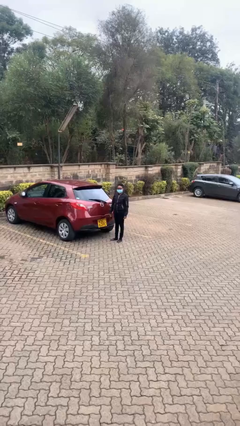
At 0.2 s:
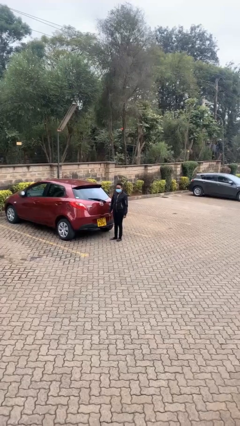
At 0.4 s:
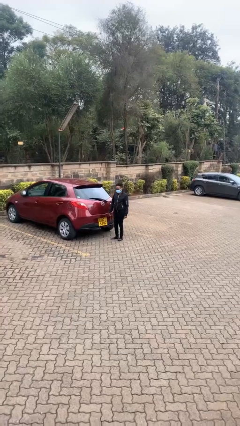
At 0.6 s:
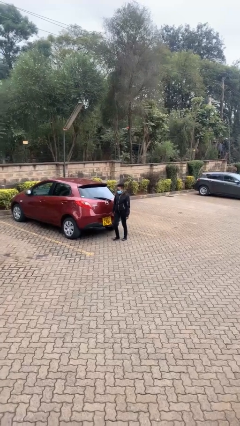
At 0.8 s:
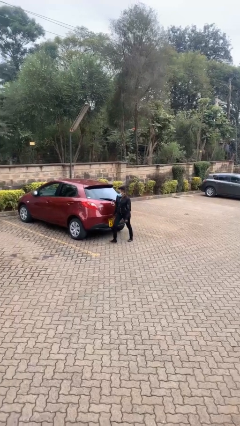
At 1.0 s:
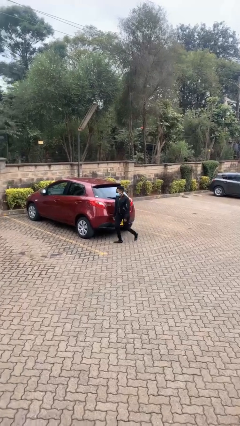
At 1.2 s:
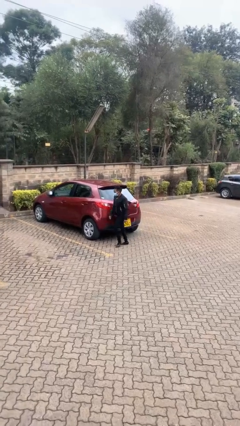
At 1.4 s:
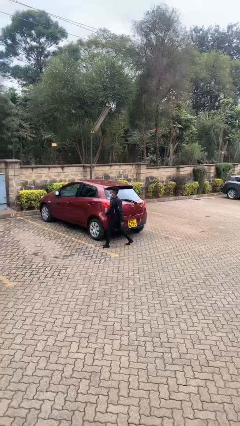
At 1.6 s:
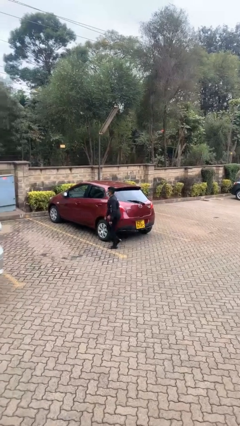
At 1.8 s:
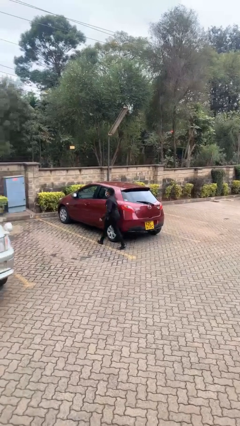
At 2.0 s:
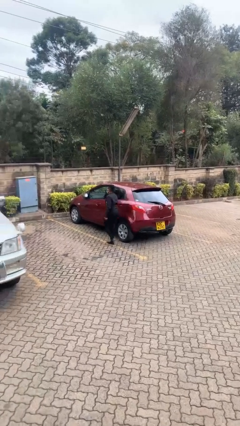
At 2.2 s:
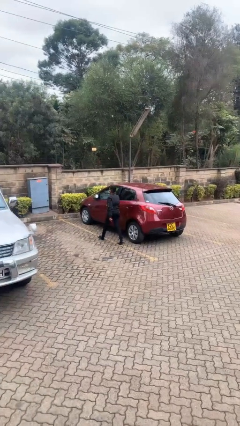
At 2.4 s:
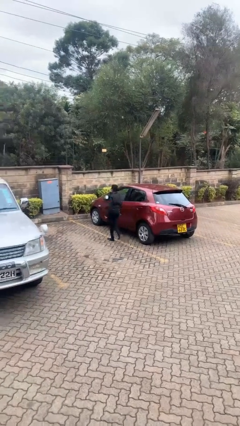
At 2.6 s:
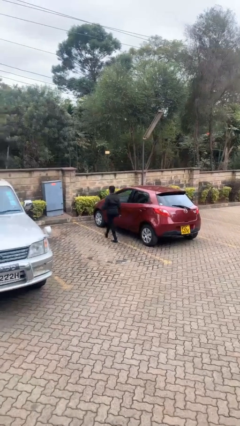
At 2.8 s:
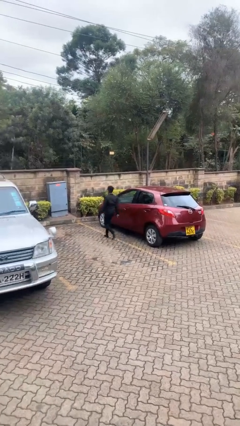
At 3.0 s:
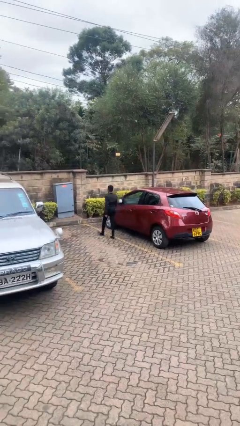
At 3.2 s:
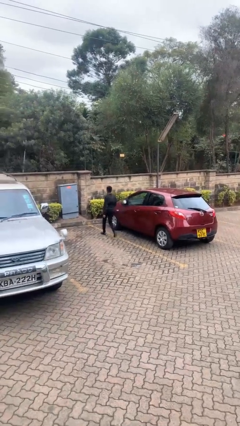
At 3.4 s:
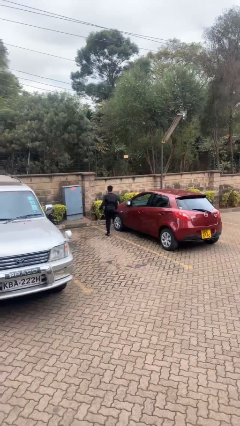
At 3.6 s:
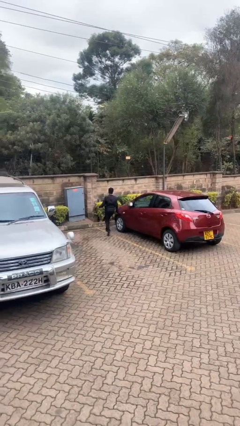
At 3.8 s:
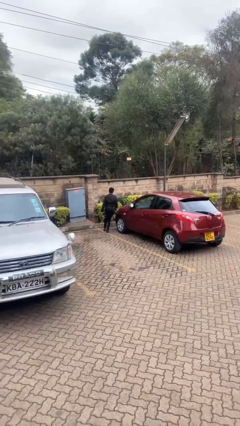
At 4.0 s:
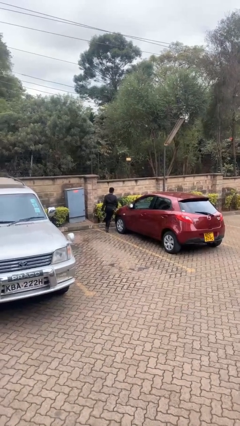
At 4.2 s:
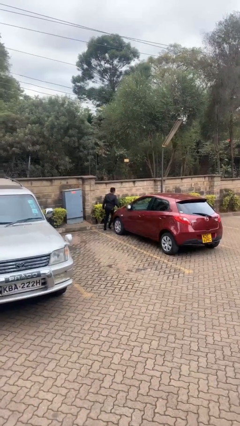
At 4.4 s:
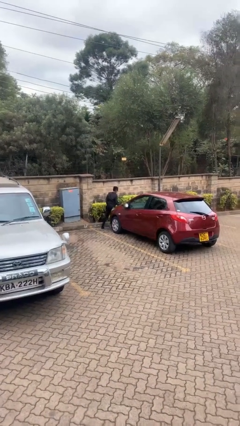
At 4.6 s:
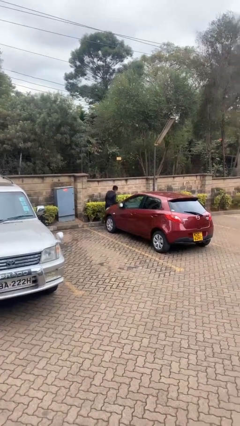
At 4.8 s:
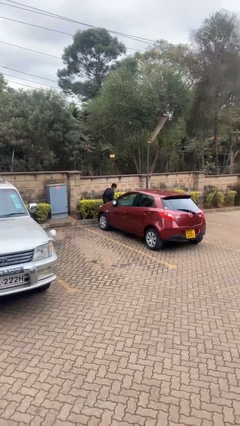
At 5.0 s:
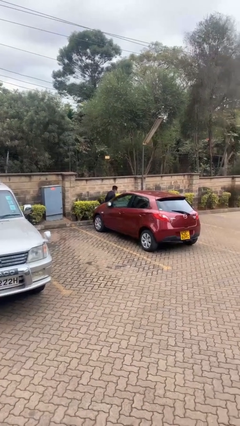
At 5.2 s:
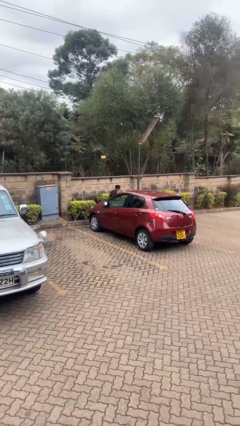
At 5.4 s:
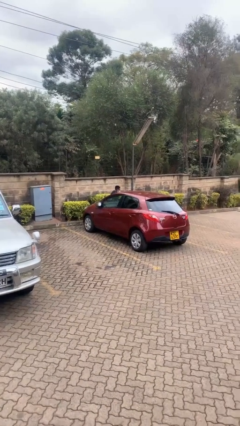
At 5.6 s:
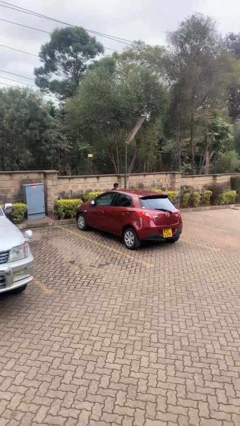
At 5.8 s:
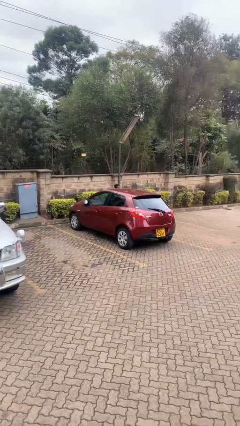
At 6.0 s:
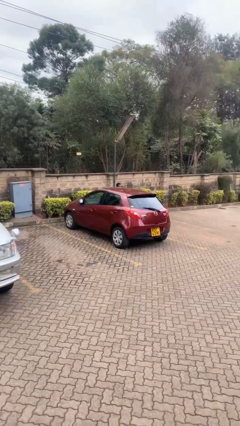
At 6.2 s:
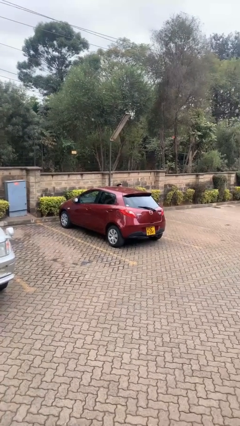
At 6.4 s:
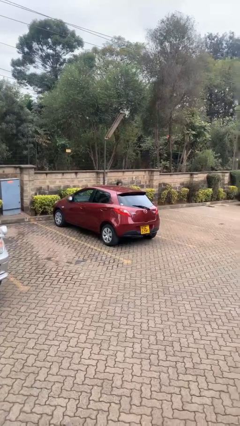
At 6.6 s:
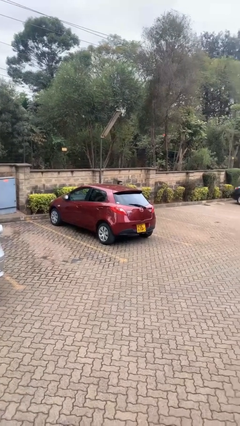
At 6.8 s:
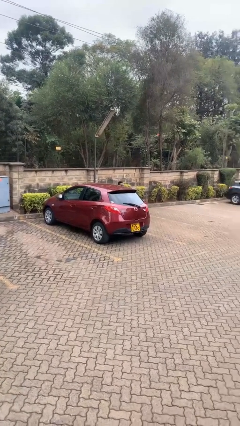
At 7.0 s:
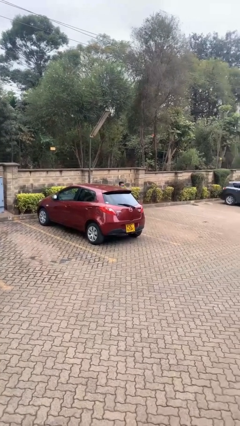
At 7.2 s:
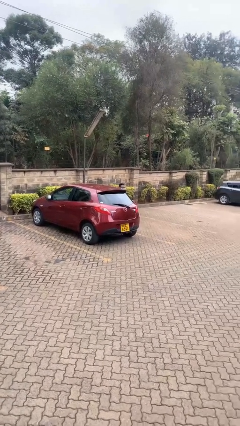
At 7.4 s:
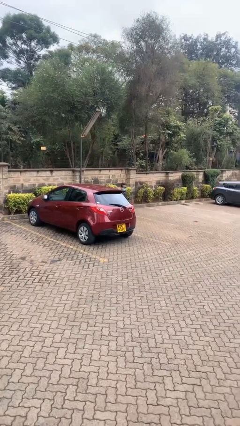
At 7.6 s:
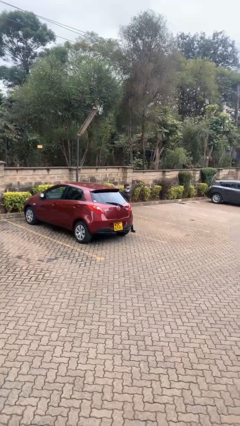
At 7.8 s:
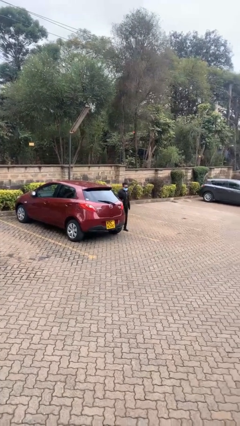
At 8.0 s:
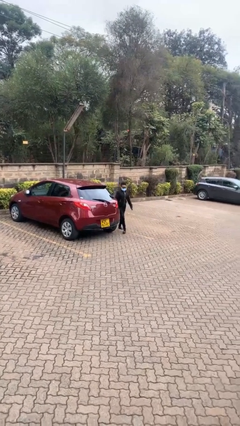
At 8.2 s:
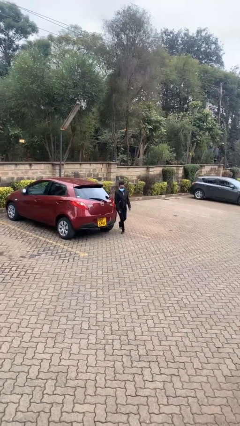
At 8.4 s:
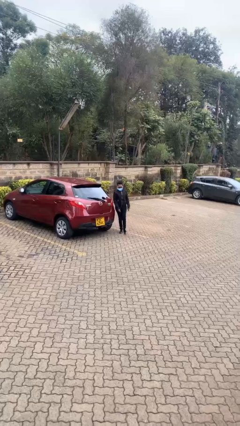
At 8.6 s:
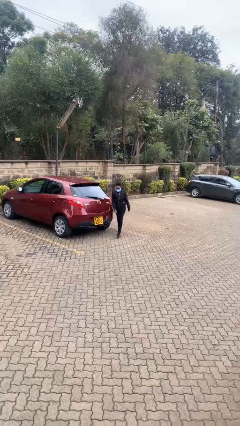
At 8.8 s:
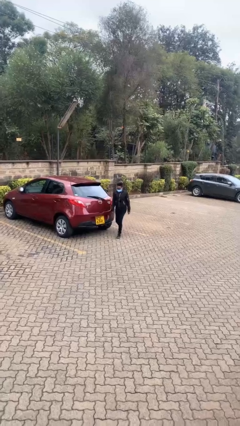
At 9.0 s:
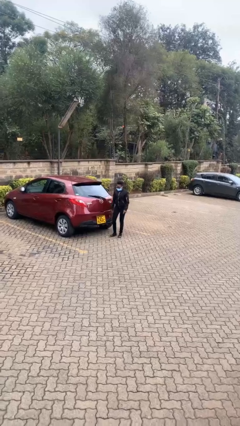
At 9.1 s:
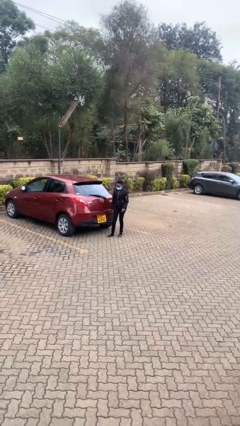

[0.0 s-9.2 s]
person walks around car

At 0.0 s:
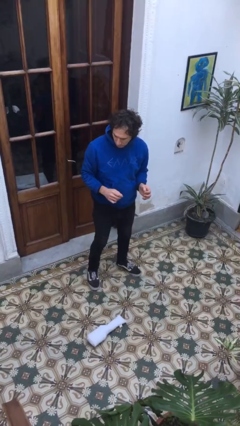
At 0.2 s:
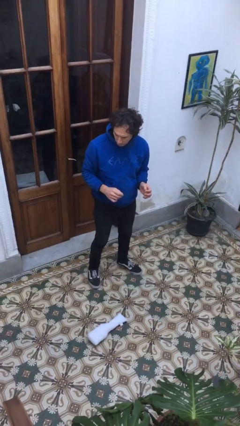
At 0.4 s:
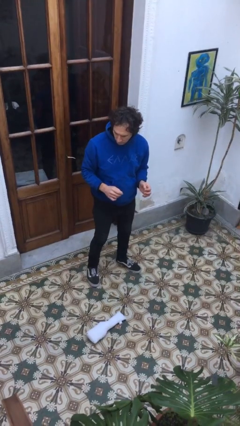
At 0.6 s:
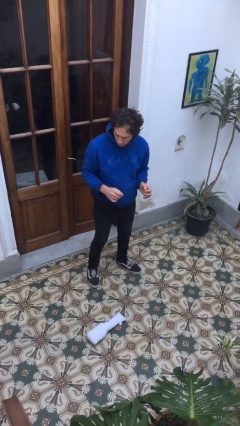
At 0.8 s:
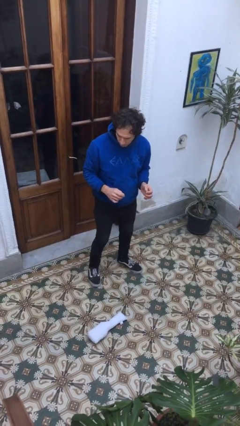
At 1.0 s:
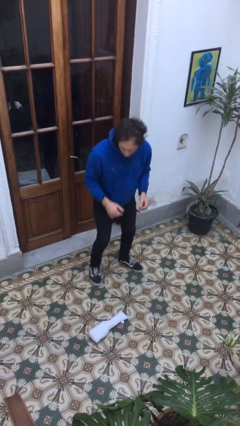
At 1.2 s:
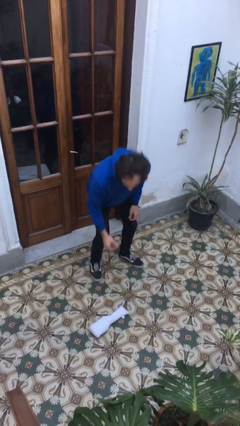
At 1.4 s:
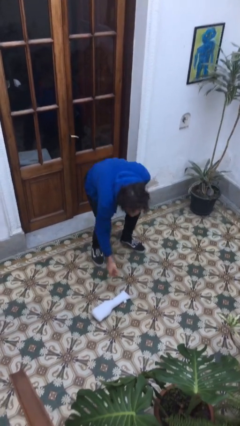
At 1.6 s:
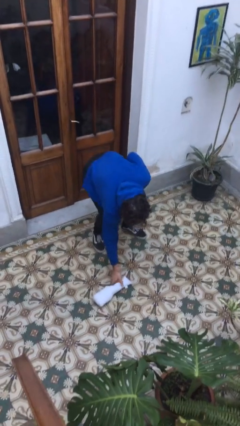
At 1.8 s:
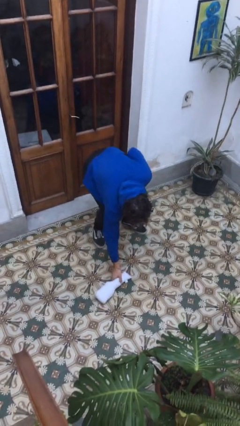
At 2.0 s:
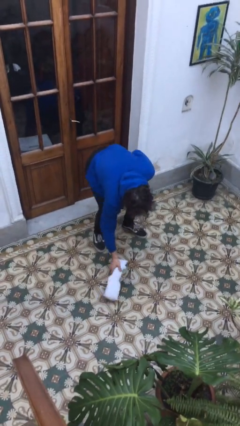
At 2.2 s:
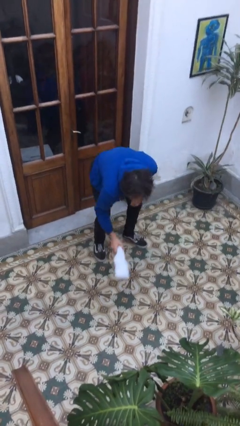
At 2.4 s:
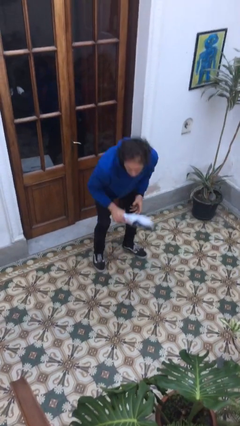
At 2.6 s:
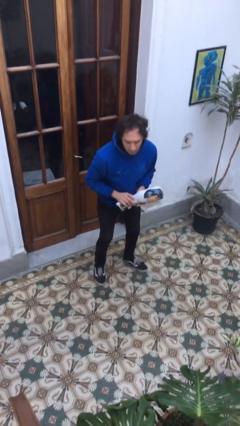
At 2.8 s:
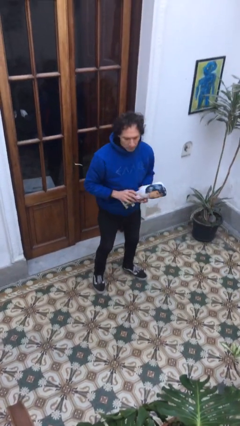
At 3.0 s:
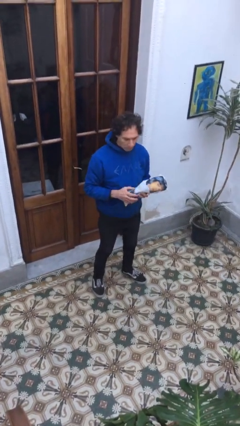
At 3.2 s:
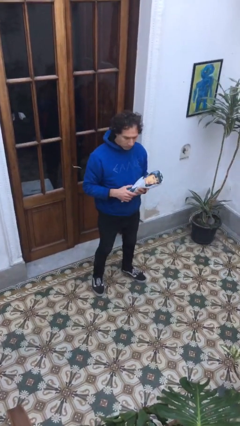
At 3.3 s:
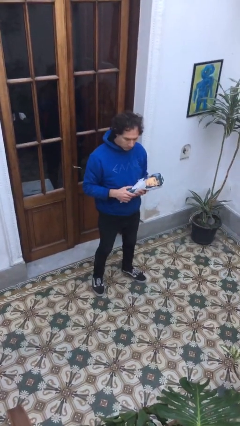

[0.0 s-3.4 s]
person picks up object from floor

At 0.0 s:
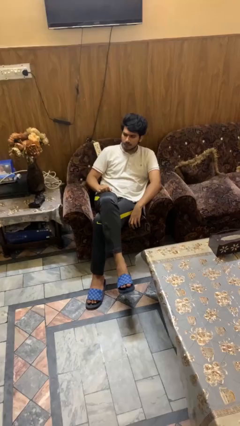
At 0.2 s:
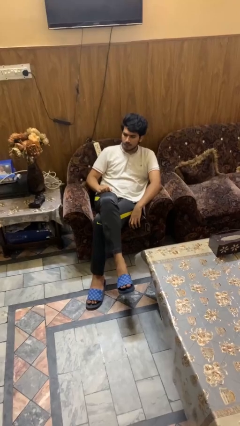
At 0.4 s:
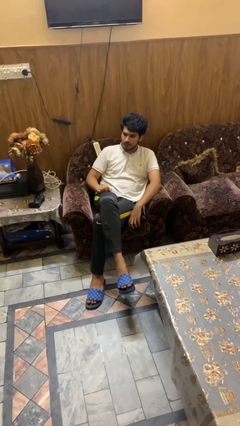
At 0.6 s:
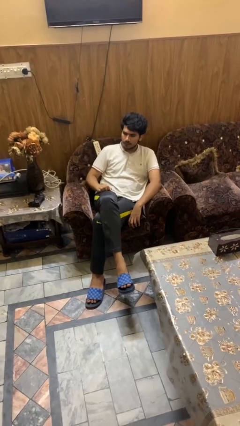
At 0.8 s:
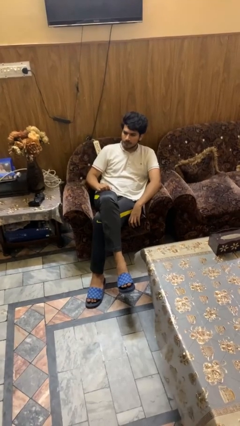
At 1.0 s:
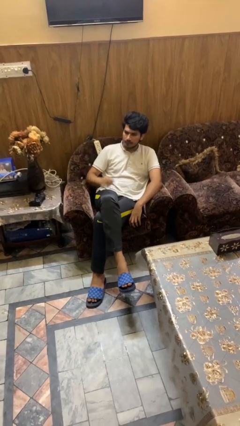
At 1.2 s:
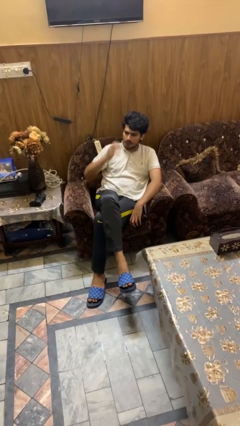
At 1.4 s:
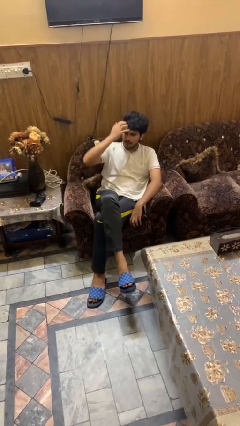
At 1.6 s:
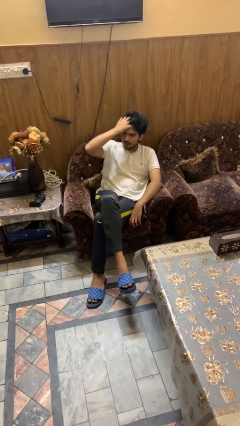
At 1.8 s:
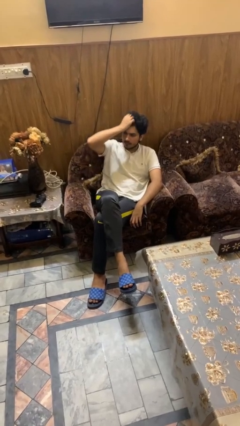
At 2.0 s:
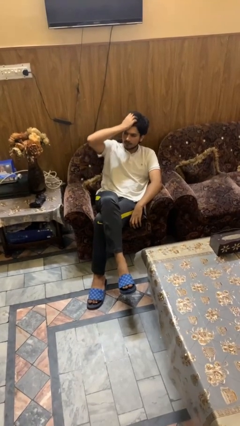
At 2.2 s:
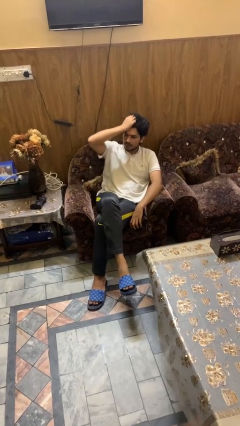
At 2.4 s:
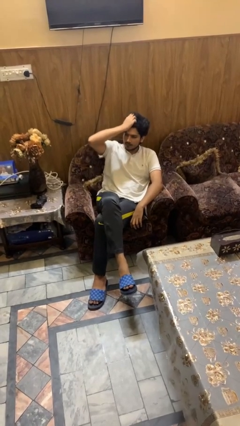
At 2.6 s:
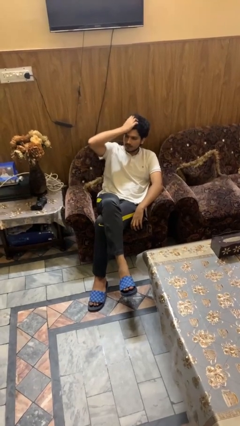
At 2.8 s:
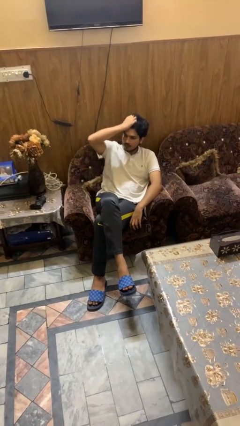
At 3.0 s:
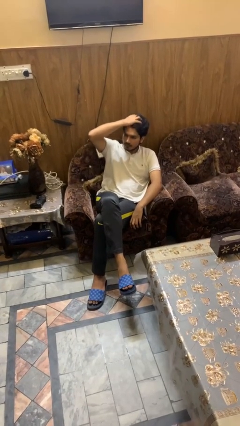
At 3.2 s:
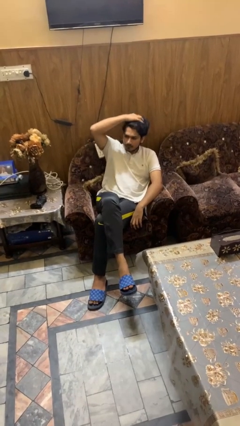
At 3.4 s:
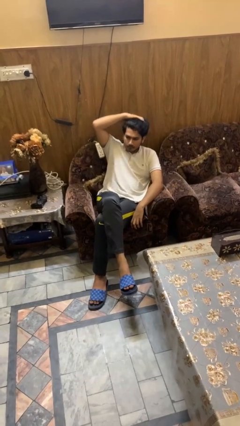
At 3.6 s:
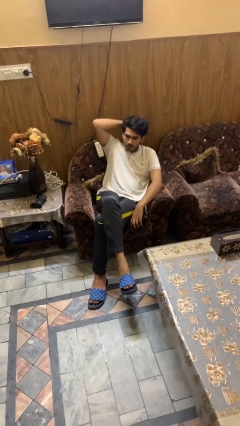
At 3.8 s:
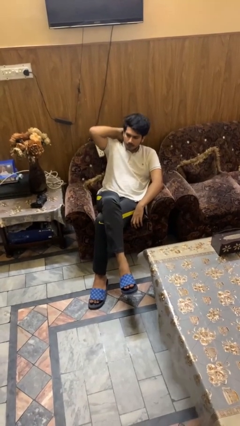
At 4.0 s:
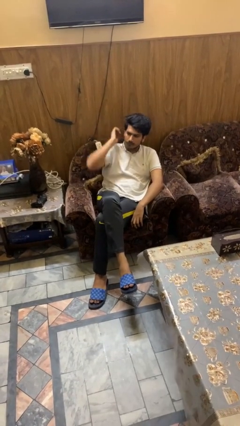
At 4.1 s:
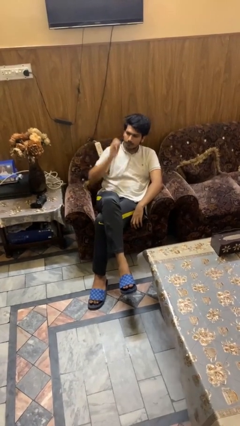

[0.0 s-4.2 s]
person scratches face

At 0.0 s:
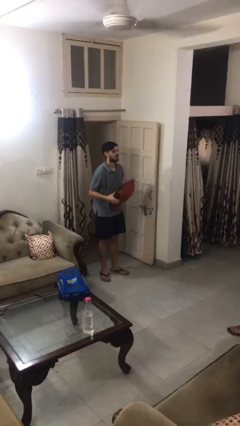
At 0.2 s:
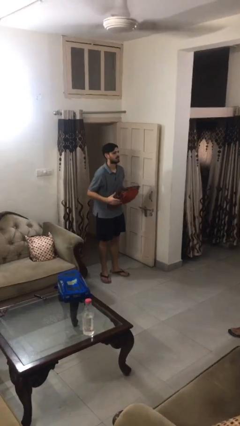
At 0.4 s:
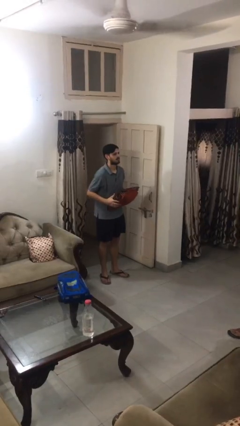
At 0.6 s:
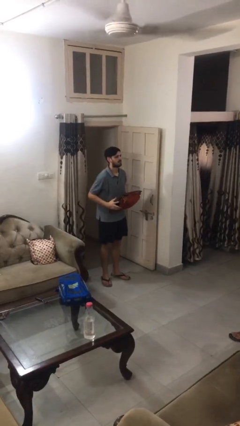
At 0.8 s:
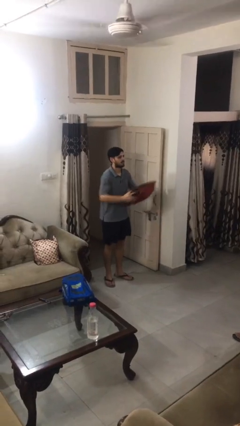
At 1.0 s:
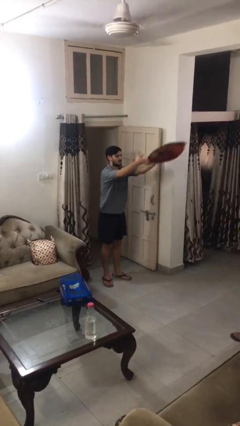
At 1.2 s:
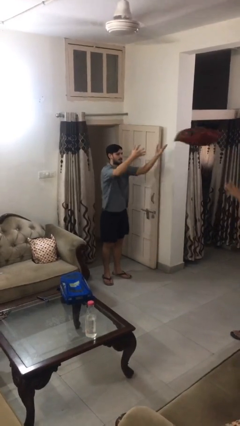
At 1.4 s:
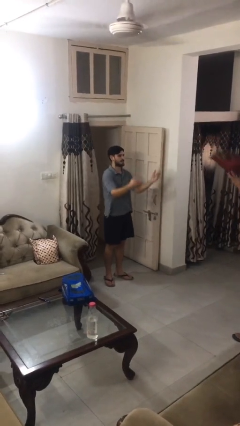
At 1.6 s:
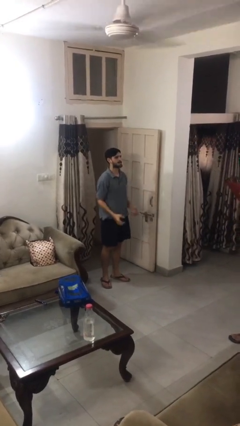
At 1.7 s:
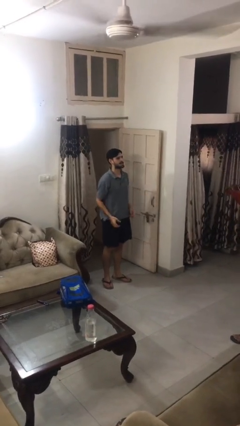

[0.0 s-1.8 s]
person throws object to person
